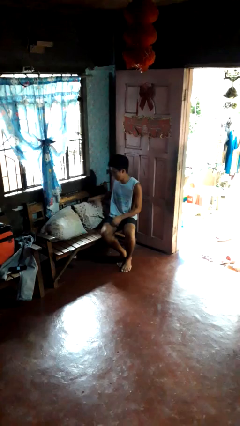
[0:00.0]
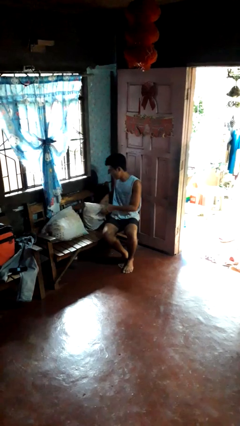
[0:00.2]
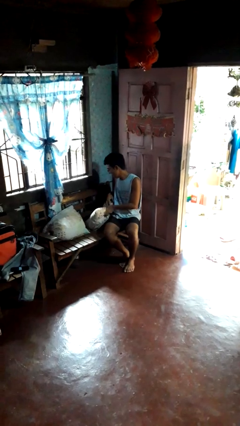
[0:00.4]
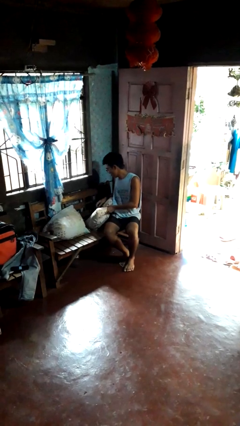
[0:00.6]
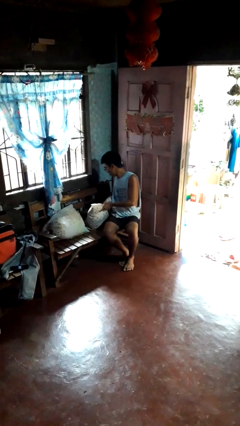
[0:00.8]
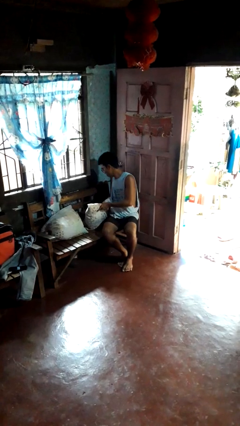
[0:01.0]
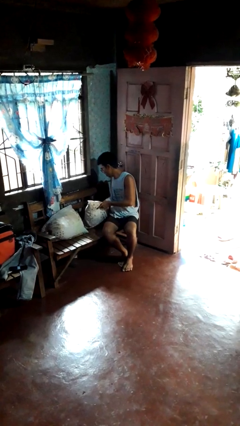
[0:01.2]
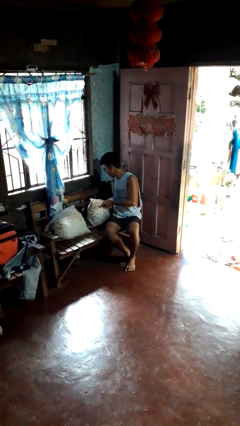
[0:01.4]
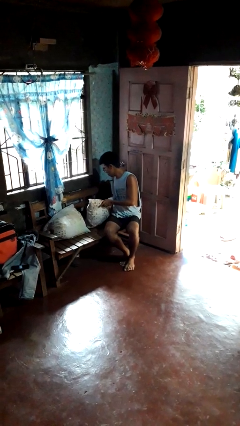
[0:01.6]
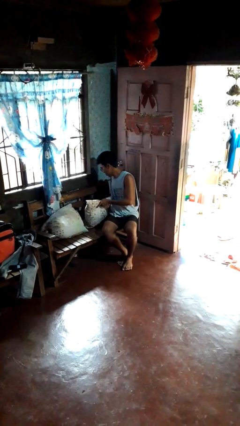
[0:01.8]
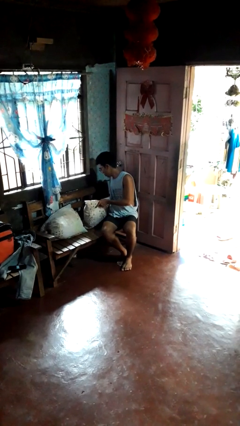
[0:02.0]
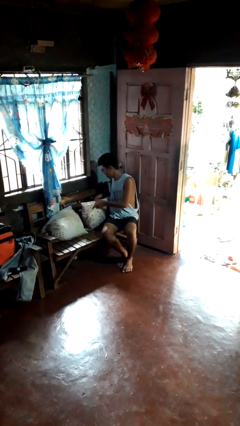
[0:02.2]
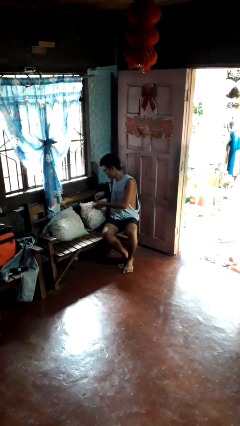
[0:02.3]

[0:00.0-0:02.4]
person searches in couch

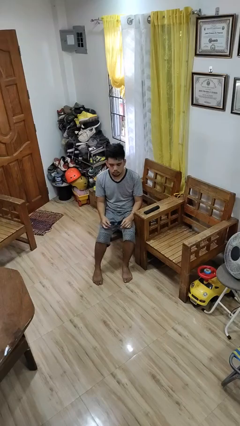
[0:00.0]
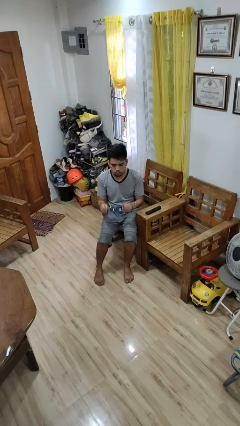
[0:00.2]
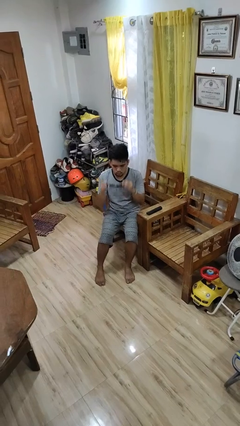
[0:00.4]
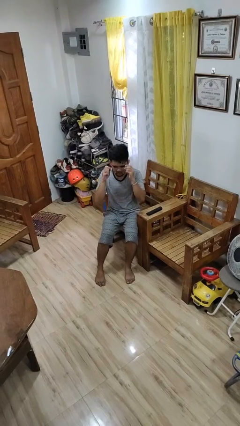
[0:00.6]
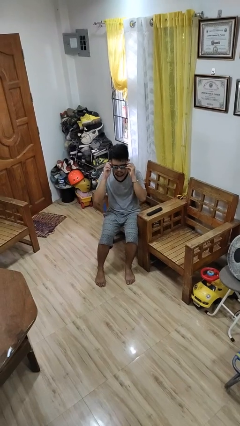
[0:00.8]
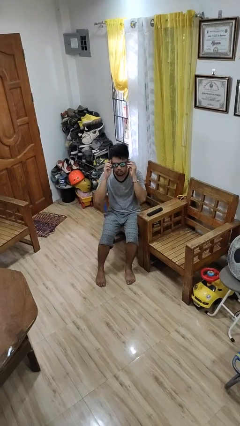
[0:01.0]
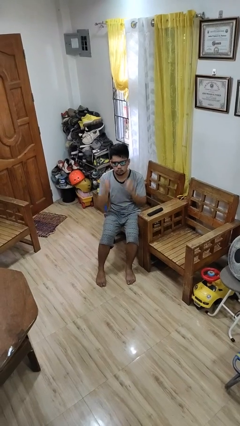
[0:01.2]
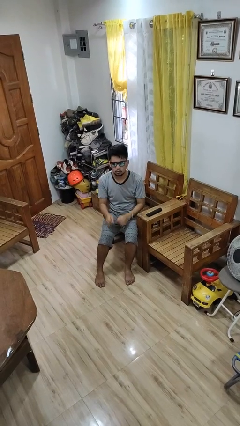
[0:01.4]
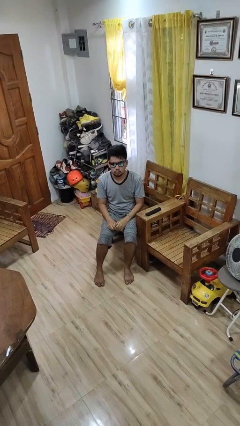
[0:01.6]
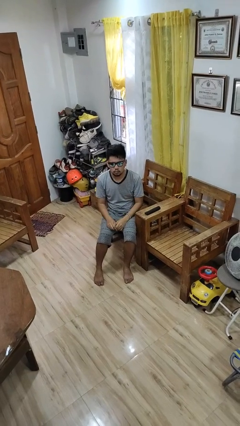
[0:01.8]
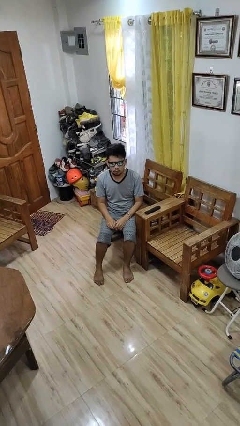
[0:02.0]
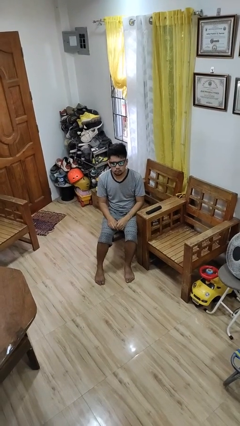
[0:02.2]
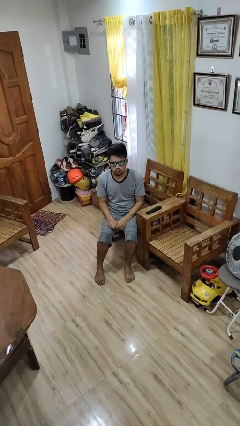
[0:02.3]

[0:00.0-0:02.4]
person puts on sunglasses

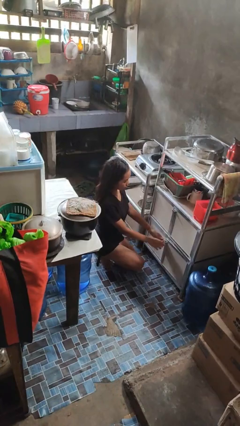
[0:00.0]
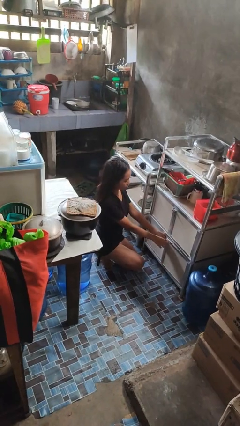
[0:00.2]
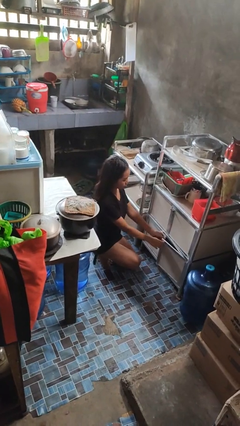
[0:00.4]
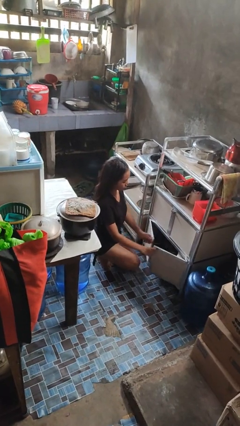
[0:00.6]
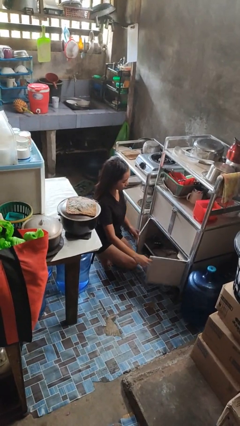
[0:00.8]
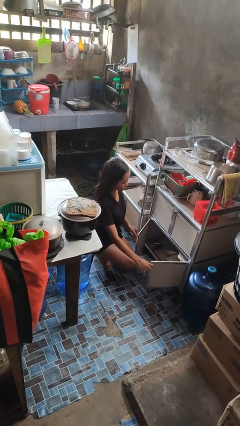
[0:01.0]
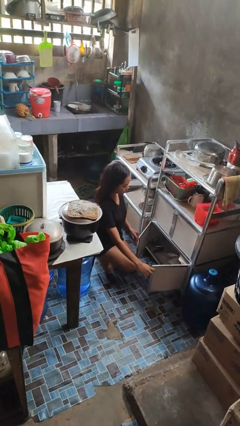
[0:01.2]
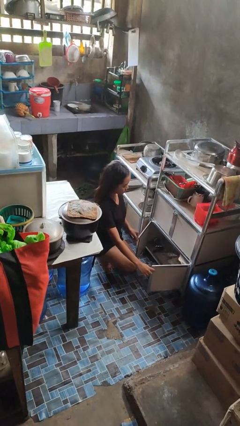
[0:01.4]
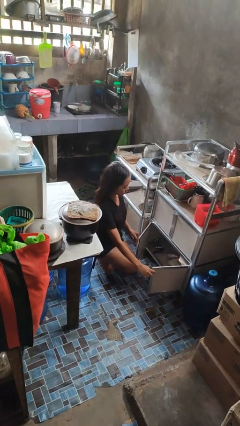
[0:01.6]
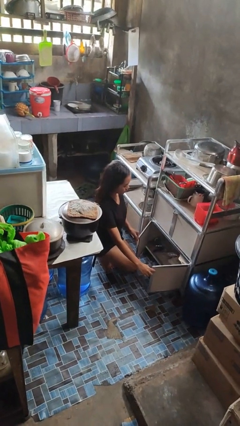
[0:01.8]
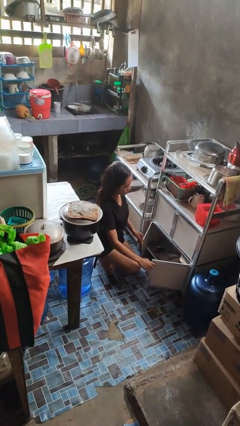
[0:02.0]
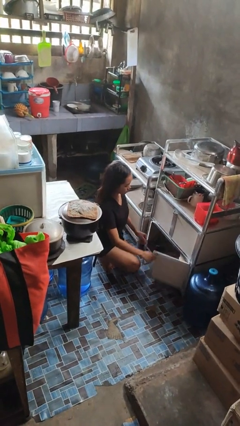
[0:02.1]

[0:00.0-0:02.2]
person opens cabinet

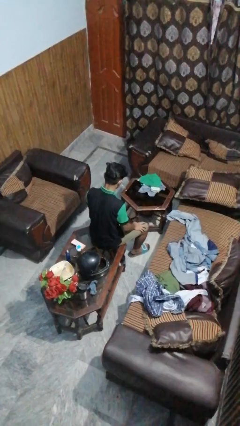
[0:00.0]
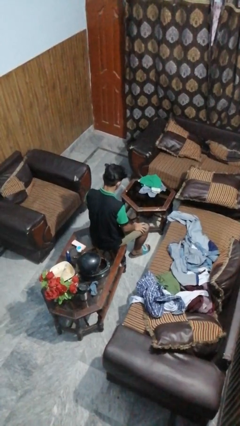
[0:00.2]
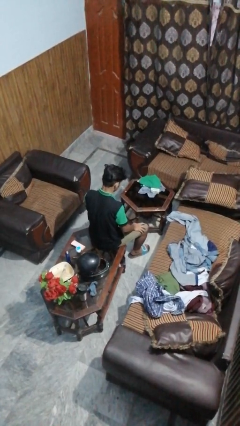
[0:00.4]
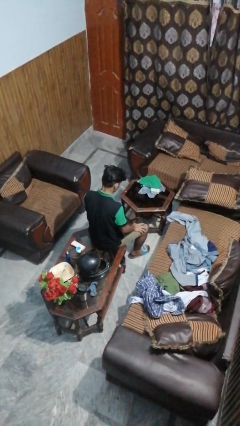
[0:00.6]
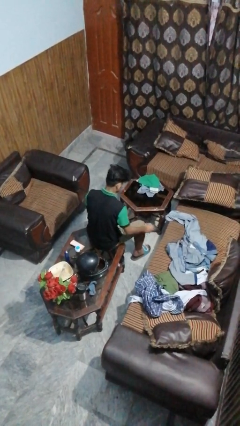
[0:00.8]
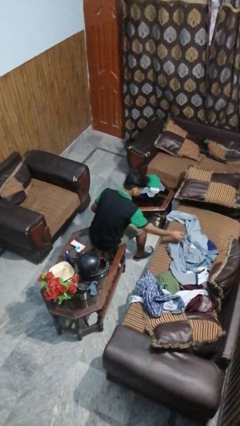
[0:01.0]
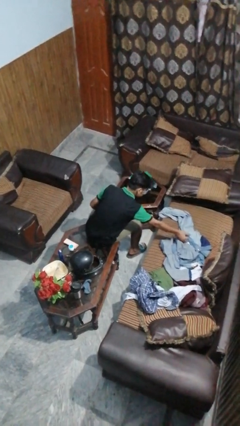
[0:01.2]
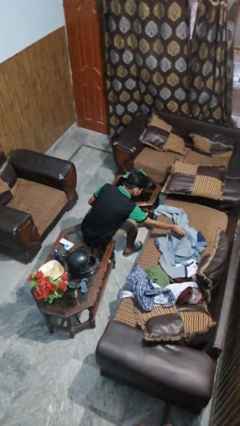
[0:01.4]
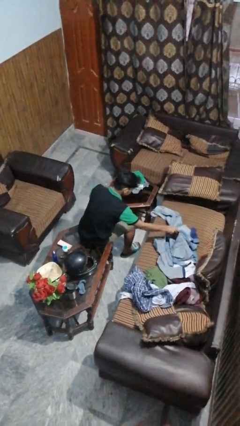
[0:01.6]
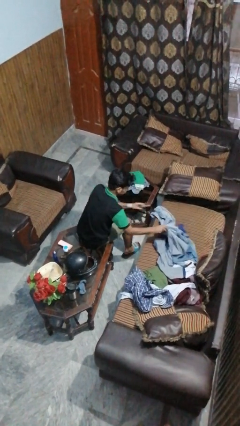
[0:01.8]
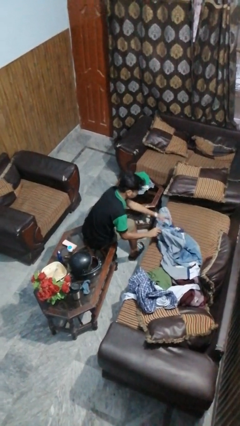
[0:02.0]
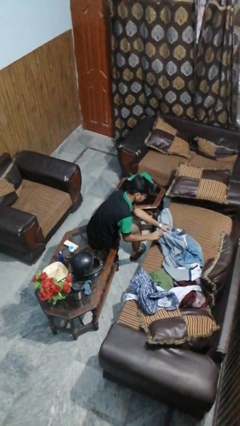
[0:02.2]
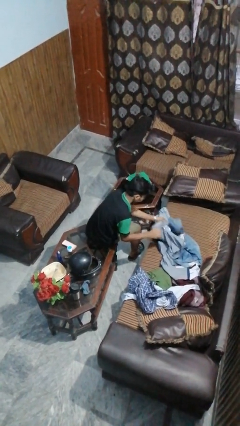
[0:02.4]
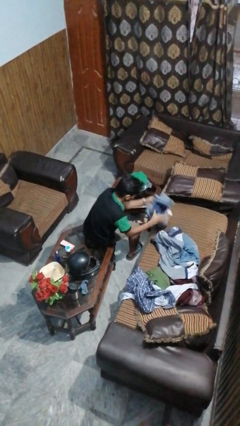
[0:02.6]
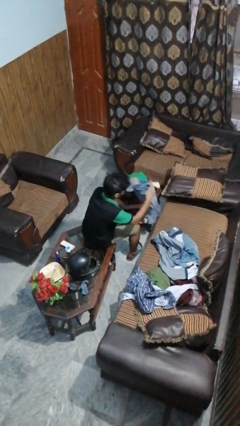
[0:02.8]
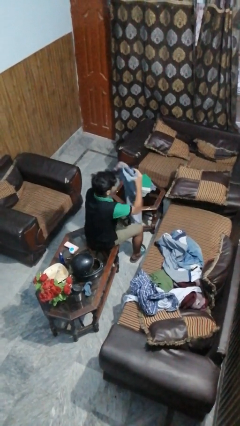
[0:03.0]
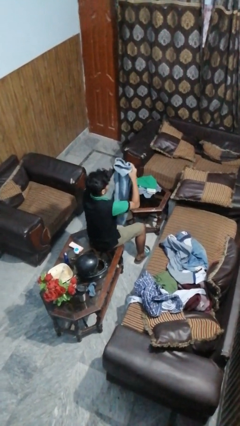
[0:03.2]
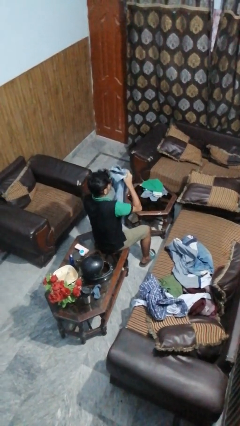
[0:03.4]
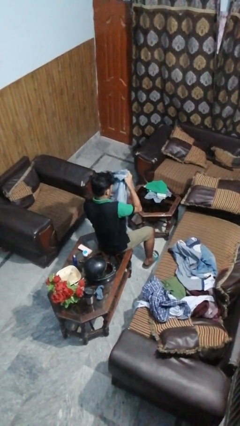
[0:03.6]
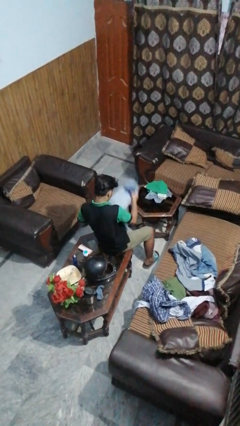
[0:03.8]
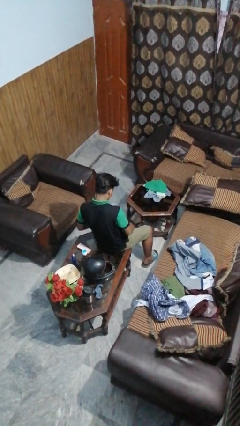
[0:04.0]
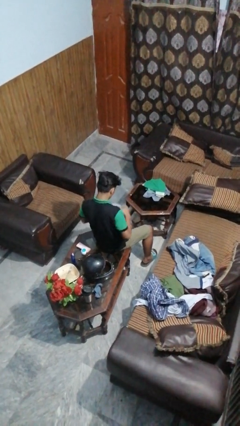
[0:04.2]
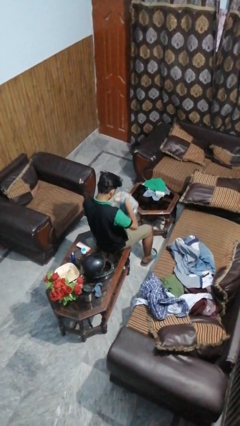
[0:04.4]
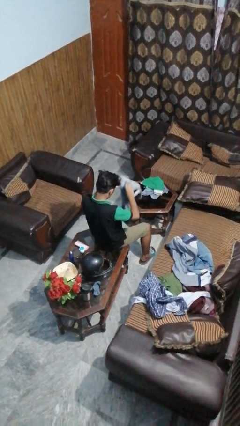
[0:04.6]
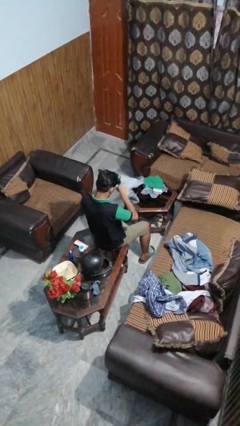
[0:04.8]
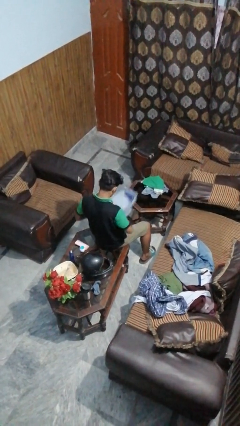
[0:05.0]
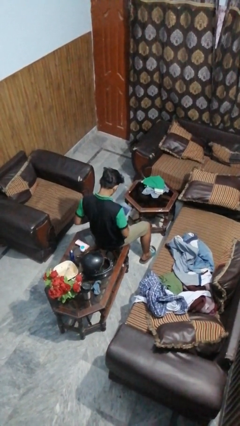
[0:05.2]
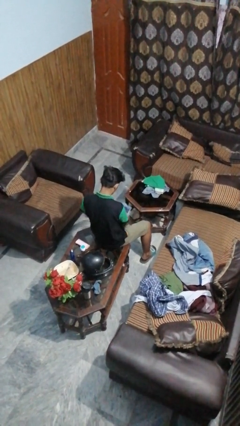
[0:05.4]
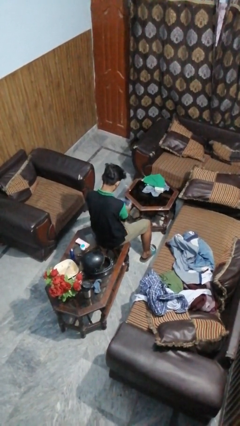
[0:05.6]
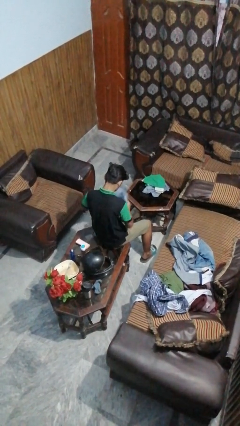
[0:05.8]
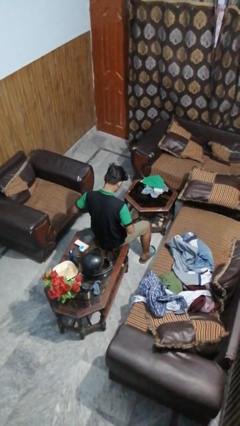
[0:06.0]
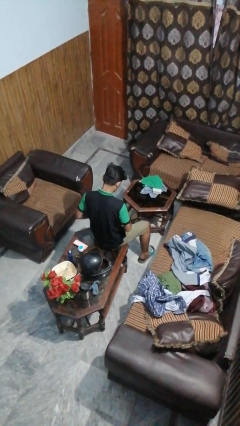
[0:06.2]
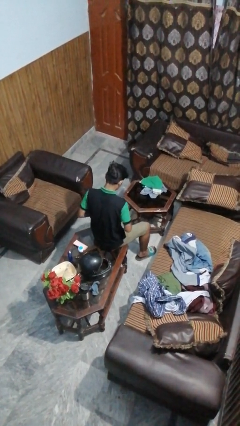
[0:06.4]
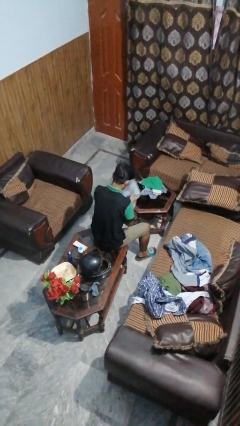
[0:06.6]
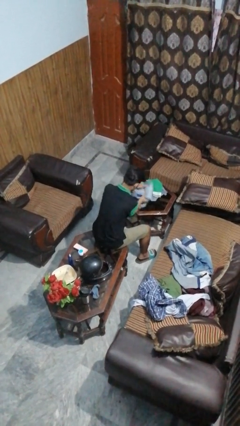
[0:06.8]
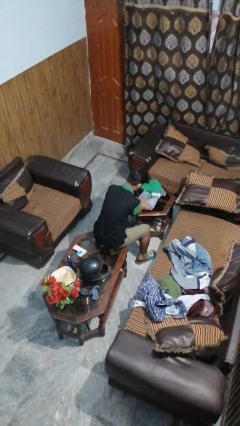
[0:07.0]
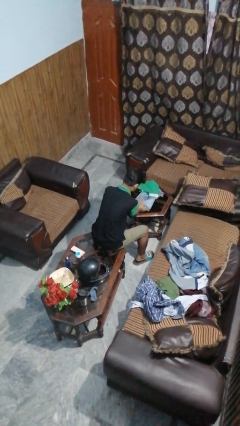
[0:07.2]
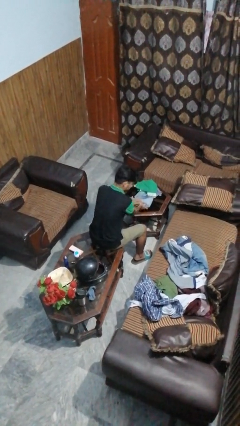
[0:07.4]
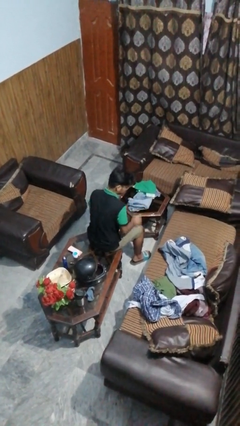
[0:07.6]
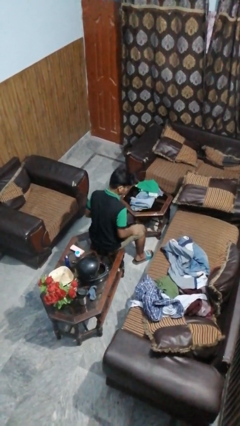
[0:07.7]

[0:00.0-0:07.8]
person folds pants

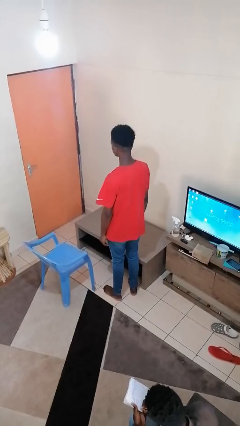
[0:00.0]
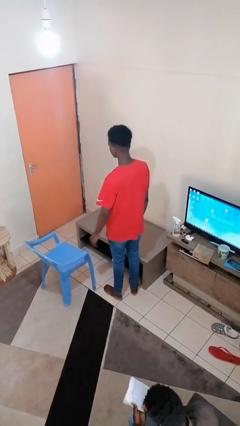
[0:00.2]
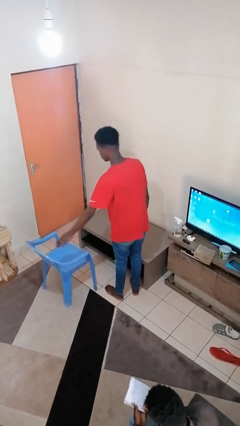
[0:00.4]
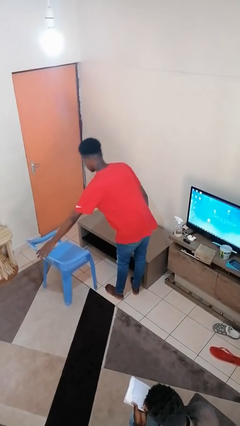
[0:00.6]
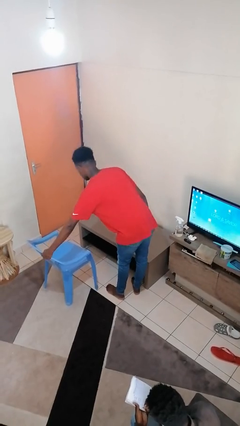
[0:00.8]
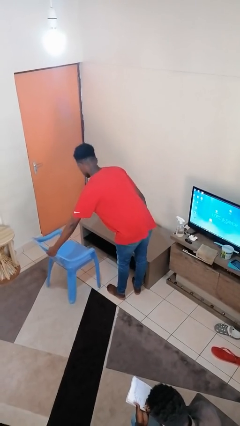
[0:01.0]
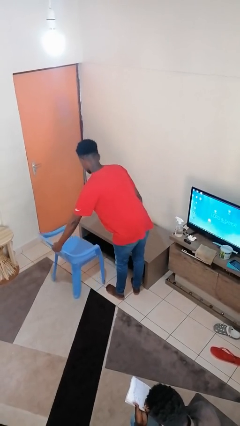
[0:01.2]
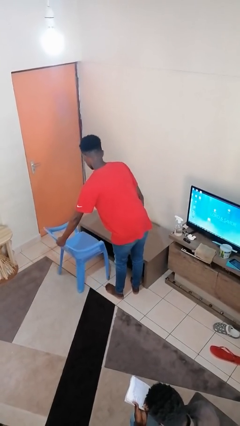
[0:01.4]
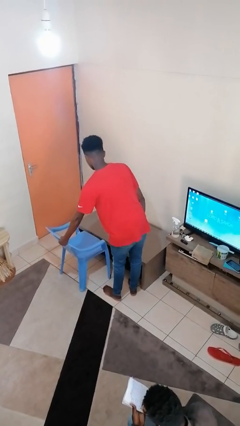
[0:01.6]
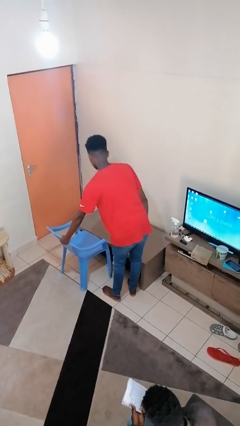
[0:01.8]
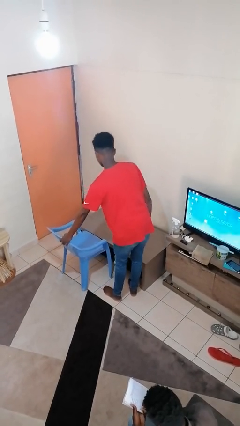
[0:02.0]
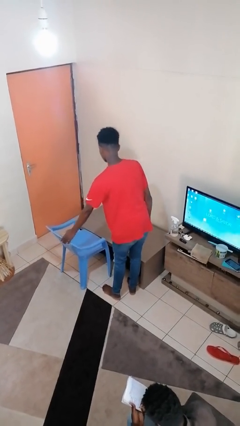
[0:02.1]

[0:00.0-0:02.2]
person pushes in chair

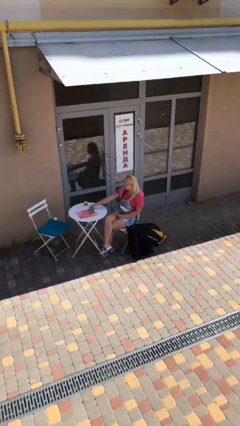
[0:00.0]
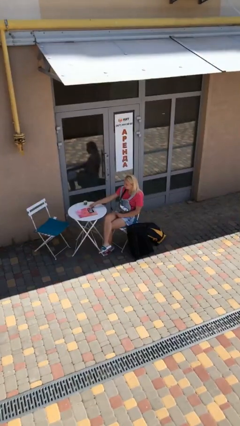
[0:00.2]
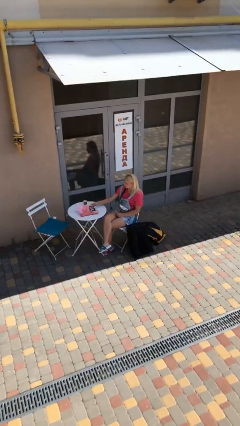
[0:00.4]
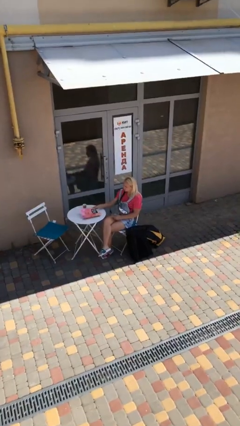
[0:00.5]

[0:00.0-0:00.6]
person picks up object from table
